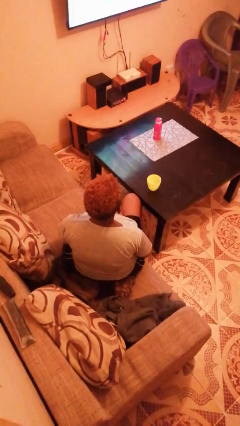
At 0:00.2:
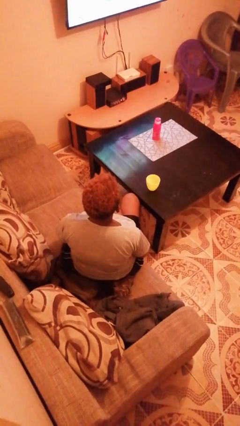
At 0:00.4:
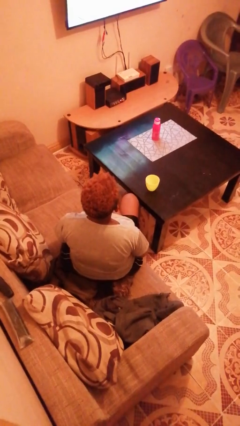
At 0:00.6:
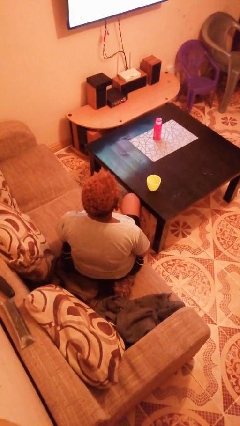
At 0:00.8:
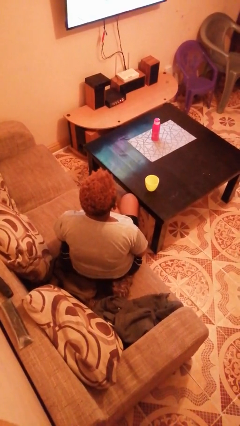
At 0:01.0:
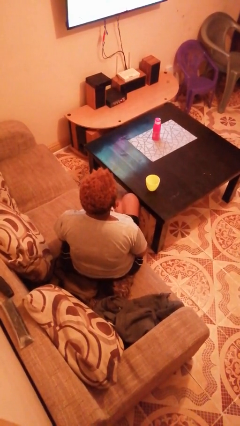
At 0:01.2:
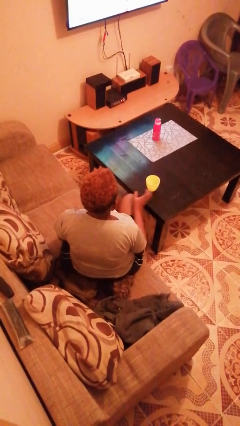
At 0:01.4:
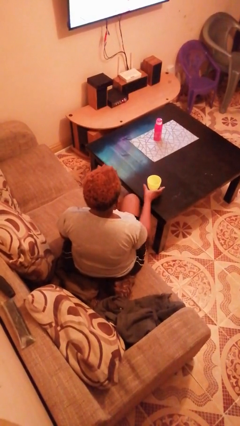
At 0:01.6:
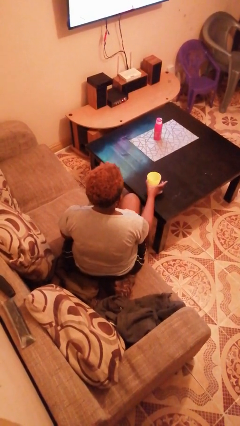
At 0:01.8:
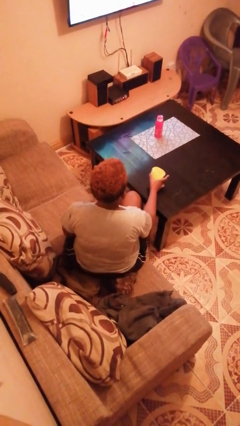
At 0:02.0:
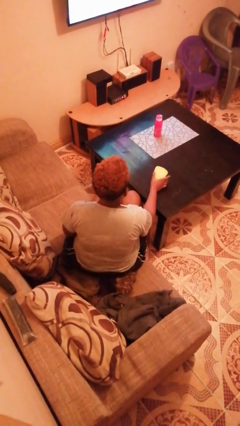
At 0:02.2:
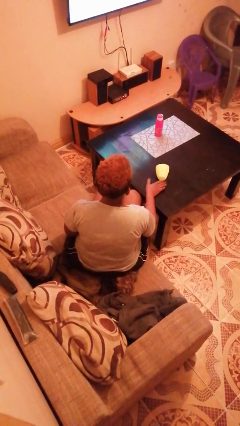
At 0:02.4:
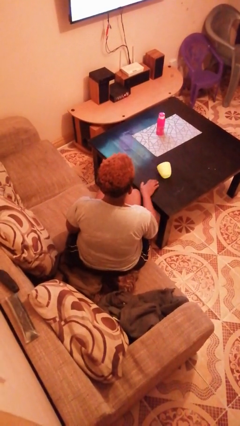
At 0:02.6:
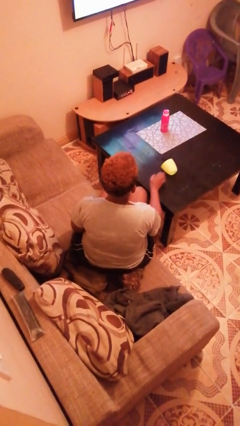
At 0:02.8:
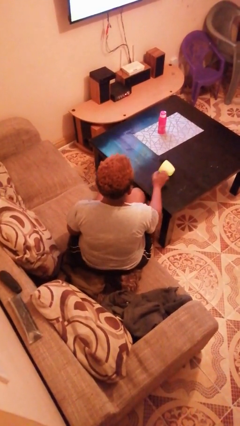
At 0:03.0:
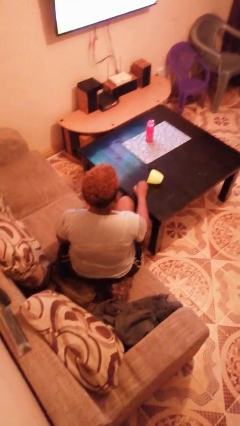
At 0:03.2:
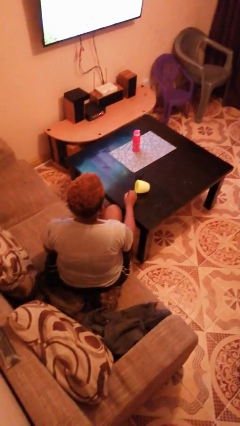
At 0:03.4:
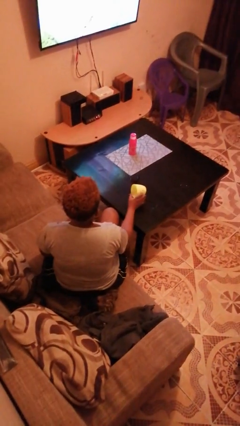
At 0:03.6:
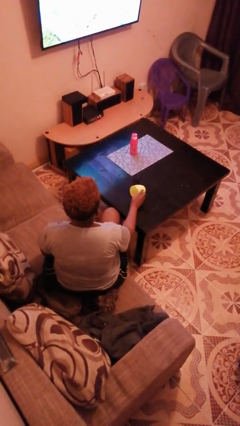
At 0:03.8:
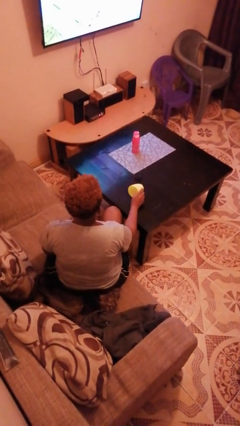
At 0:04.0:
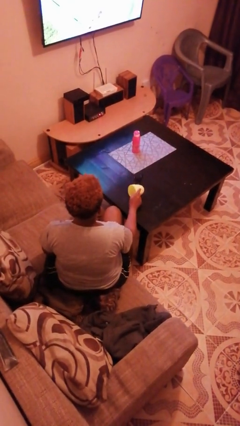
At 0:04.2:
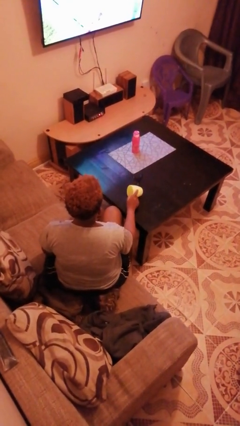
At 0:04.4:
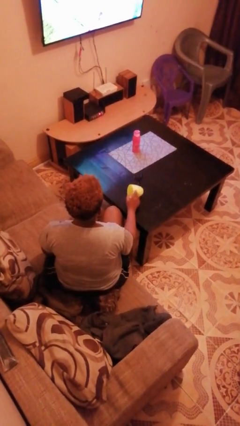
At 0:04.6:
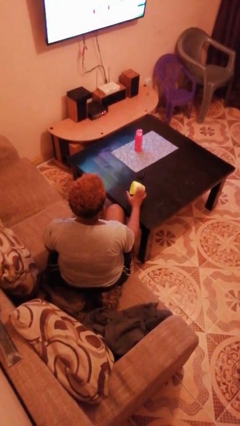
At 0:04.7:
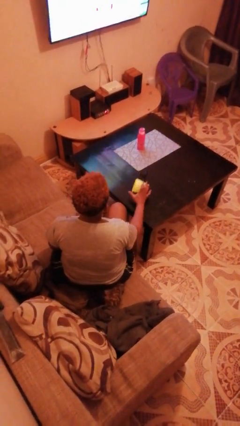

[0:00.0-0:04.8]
person spills on table

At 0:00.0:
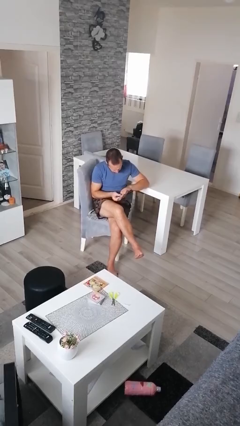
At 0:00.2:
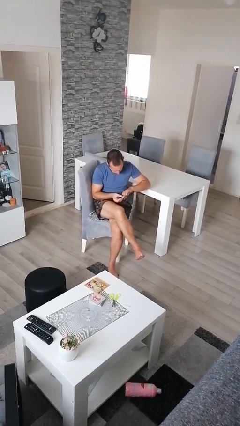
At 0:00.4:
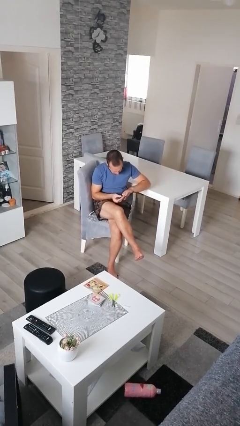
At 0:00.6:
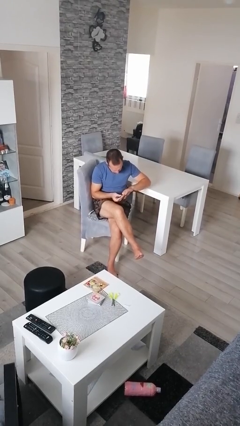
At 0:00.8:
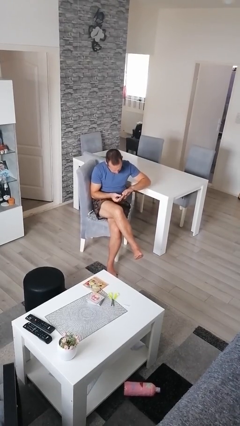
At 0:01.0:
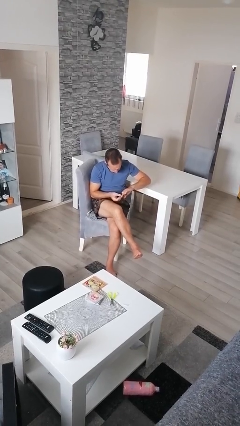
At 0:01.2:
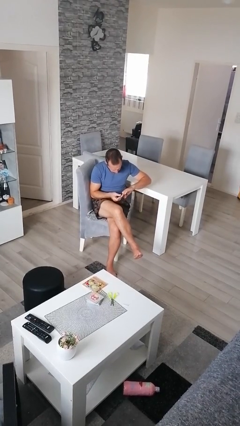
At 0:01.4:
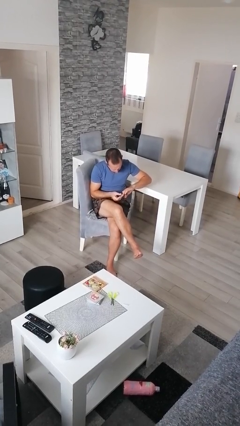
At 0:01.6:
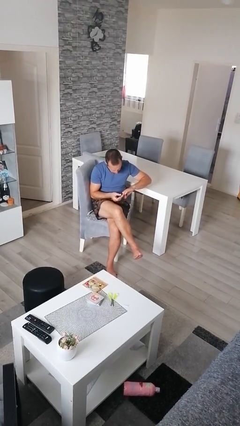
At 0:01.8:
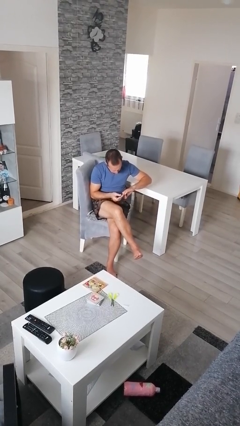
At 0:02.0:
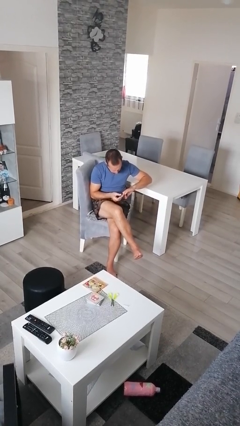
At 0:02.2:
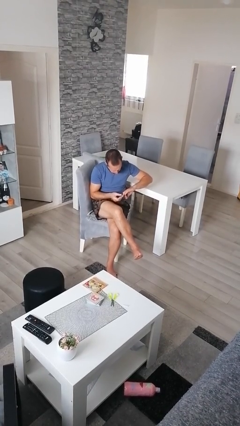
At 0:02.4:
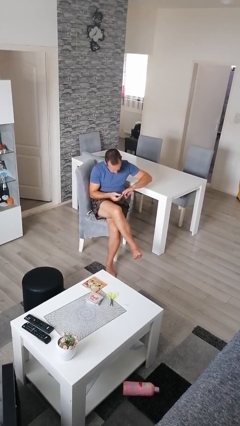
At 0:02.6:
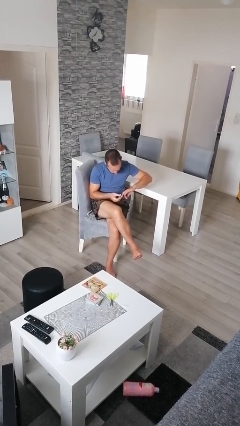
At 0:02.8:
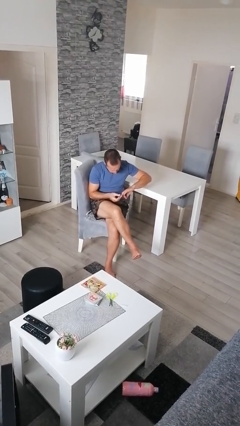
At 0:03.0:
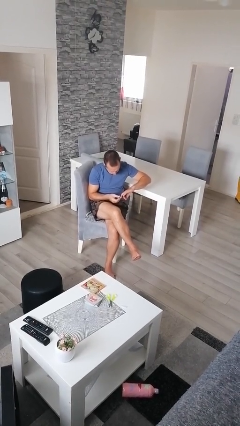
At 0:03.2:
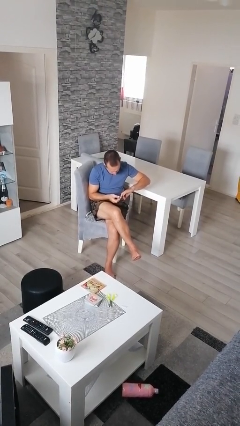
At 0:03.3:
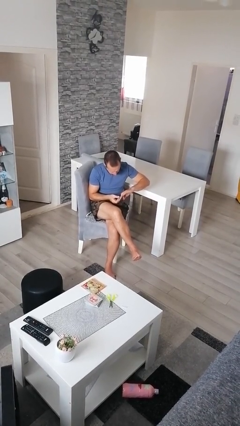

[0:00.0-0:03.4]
person clips fingernails

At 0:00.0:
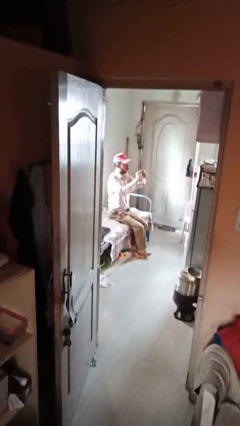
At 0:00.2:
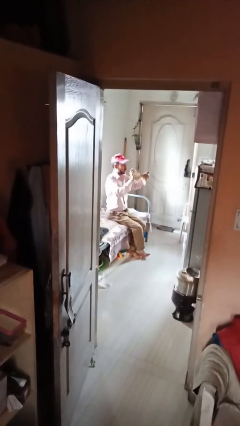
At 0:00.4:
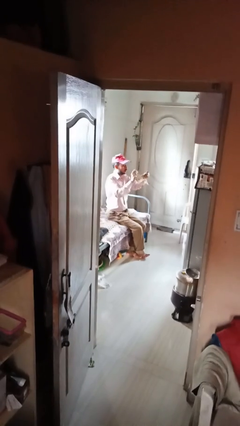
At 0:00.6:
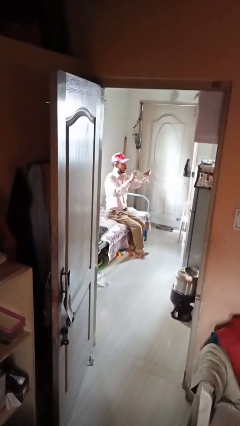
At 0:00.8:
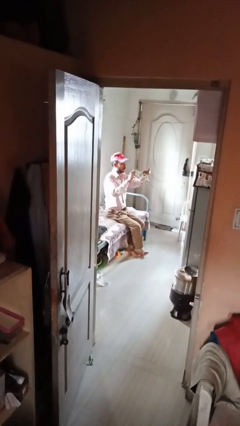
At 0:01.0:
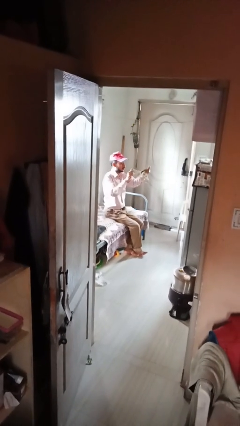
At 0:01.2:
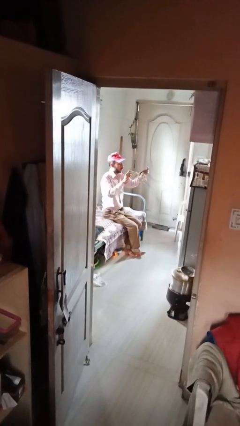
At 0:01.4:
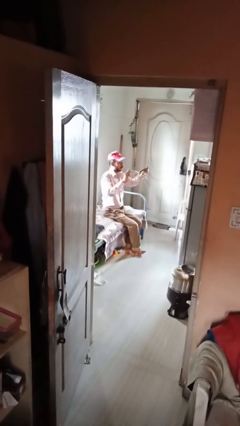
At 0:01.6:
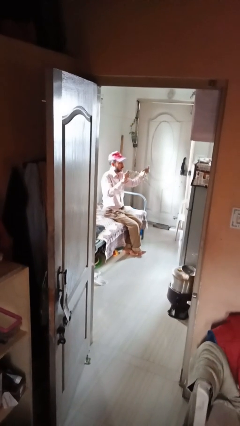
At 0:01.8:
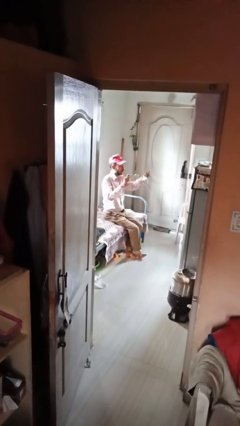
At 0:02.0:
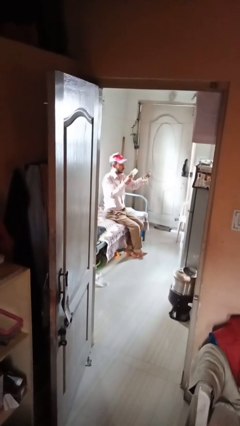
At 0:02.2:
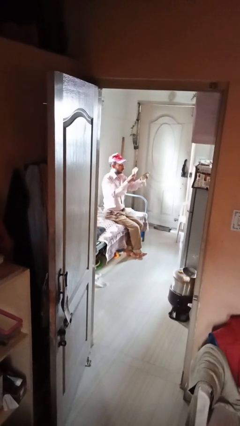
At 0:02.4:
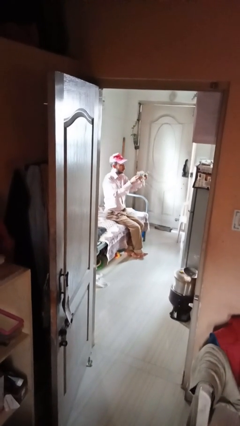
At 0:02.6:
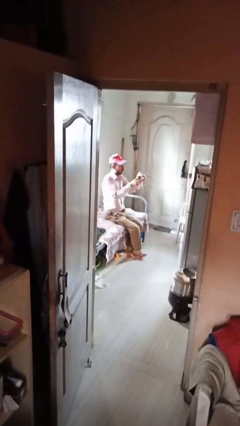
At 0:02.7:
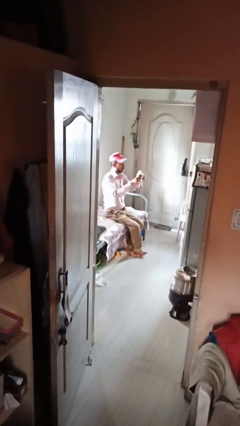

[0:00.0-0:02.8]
person tears paper

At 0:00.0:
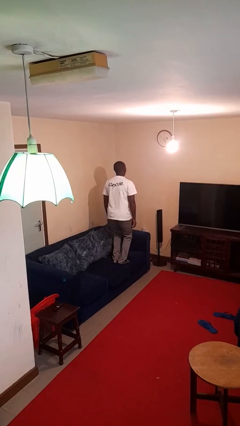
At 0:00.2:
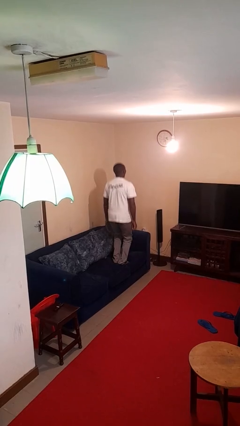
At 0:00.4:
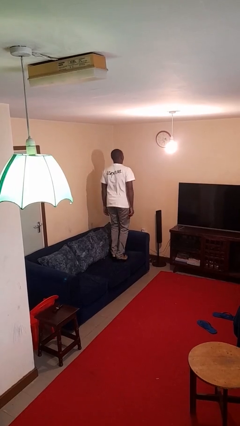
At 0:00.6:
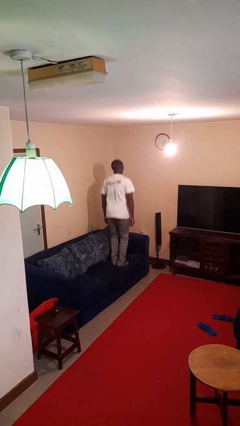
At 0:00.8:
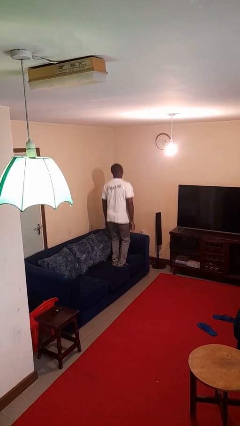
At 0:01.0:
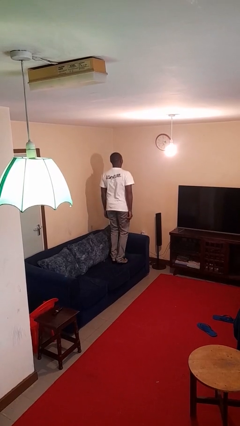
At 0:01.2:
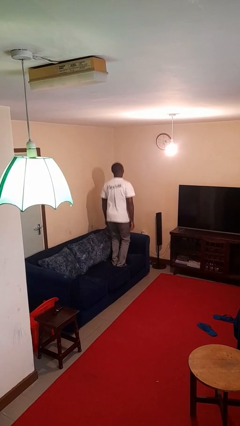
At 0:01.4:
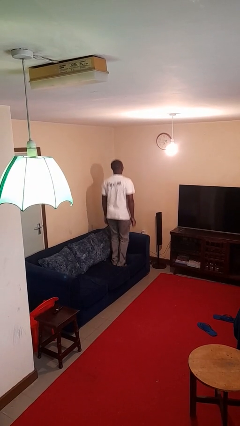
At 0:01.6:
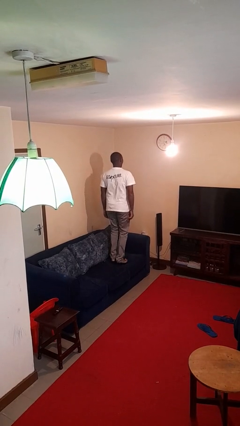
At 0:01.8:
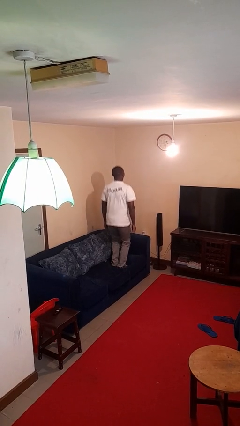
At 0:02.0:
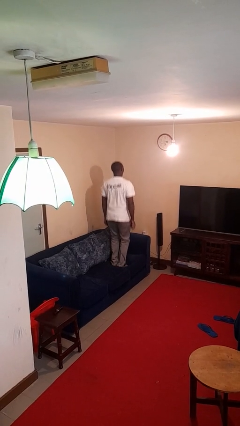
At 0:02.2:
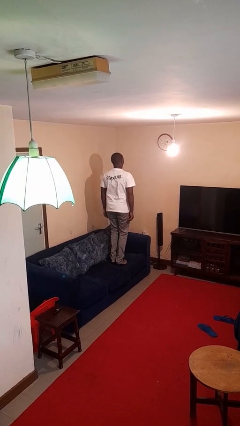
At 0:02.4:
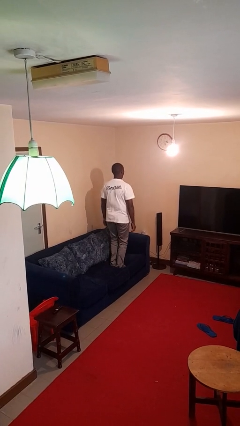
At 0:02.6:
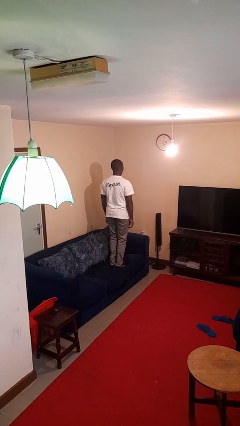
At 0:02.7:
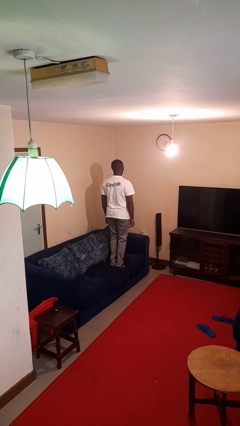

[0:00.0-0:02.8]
person jumps on couch

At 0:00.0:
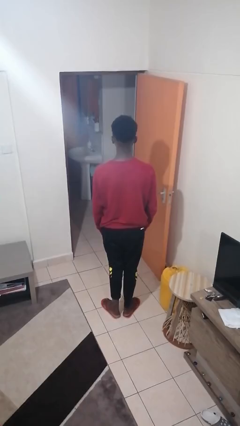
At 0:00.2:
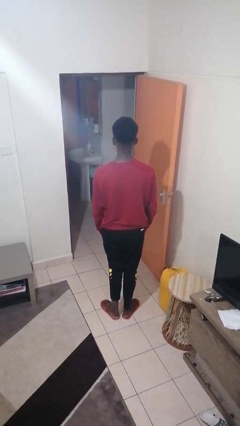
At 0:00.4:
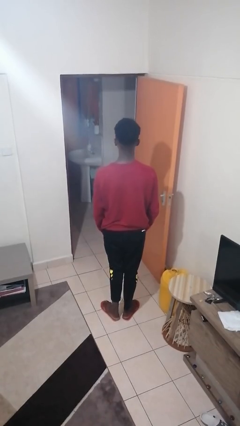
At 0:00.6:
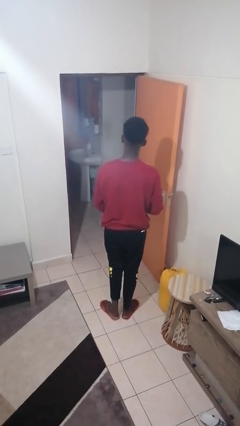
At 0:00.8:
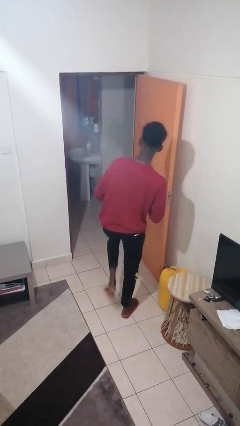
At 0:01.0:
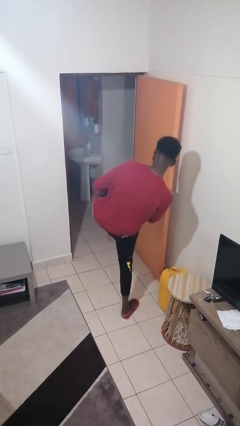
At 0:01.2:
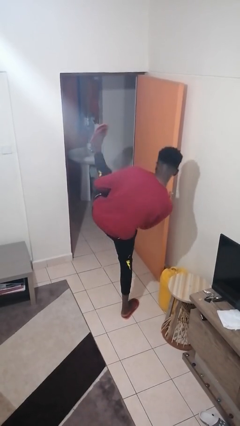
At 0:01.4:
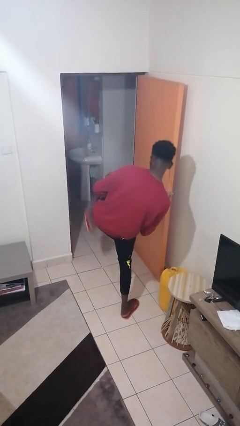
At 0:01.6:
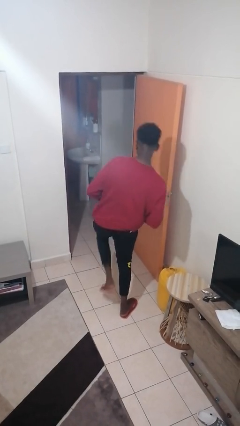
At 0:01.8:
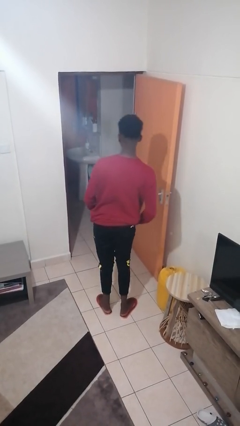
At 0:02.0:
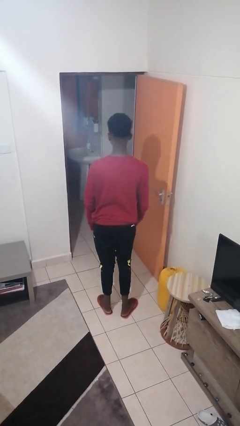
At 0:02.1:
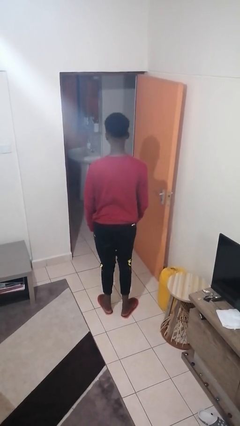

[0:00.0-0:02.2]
person karate kicks

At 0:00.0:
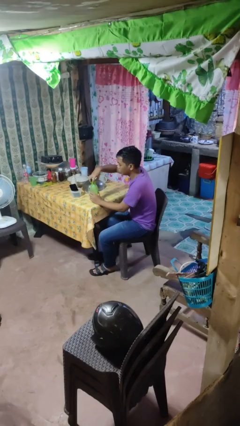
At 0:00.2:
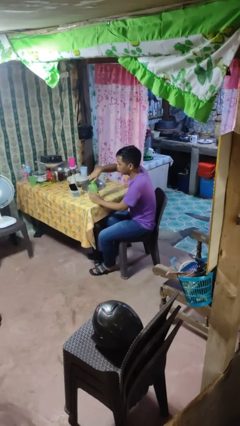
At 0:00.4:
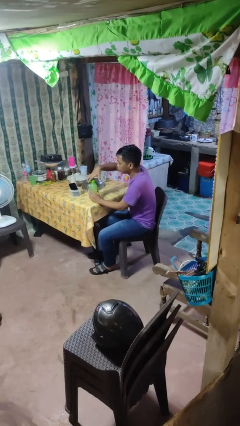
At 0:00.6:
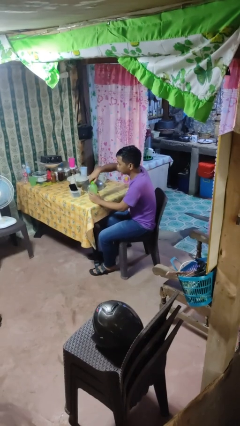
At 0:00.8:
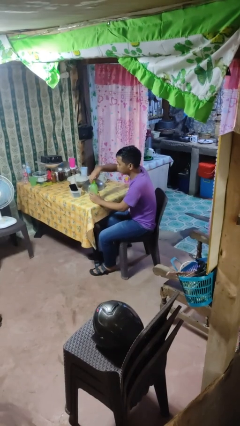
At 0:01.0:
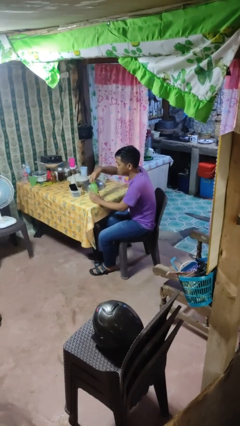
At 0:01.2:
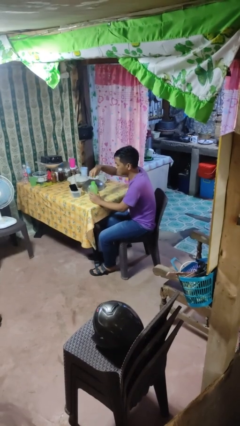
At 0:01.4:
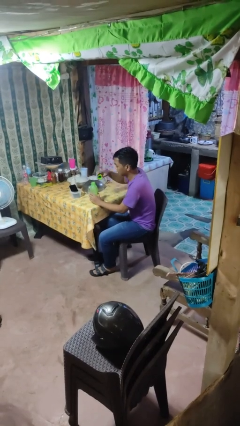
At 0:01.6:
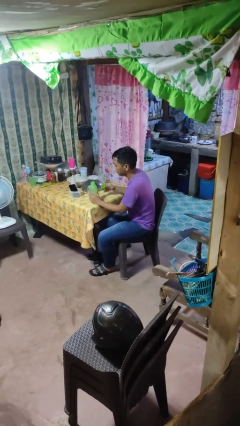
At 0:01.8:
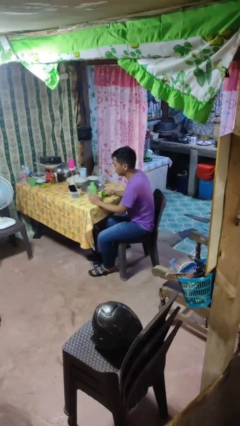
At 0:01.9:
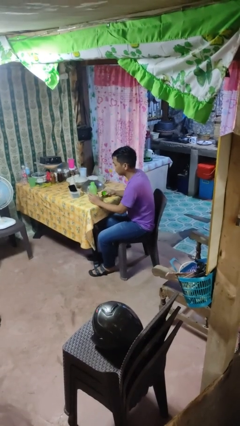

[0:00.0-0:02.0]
person unscrews lid from bottle
